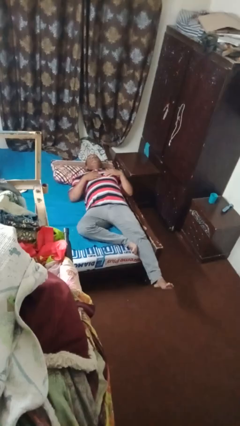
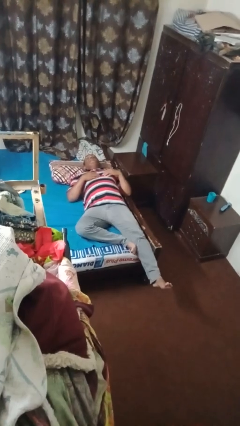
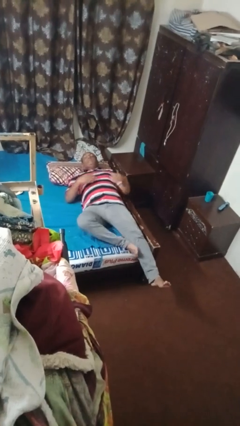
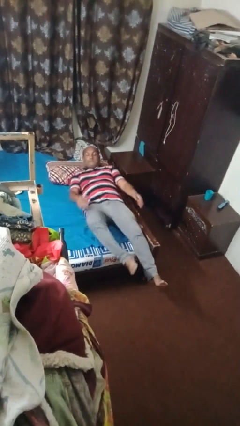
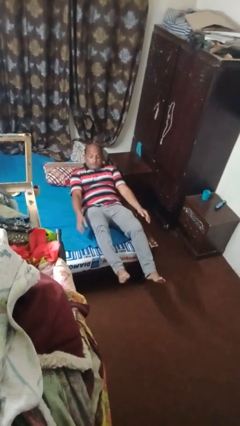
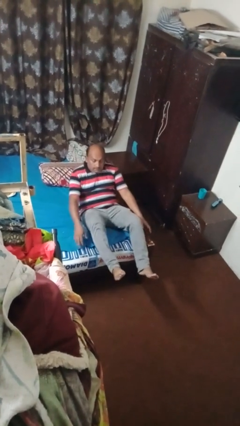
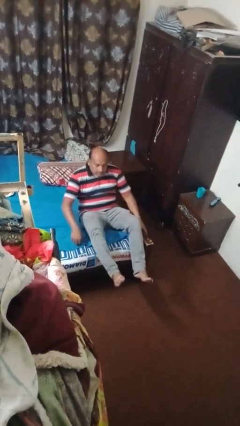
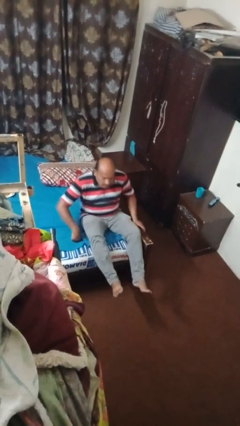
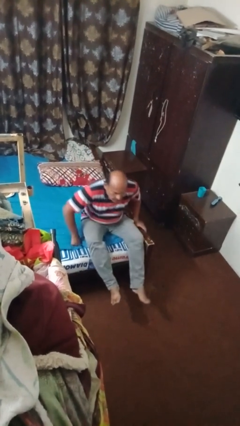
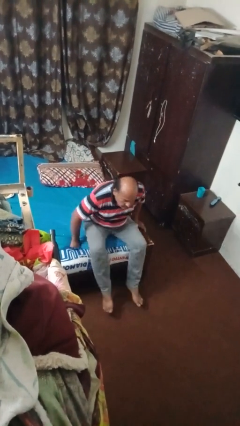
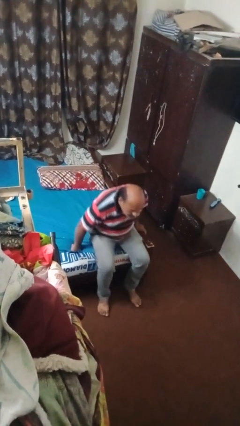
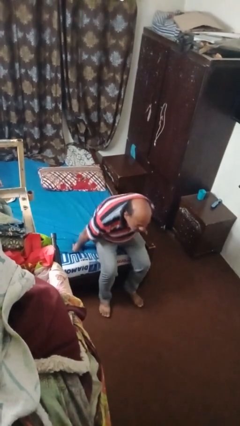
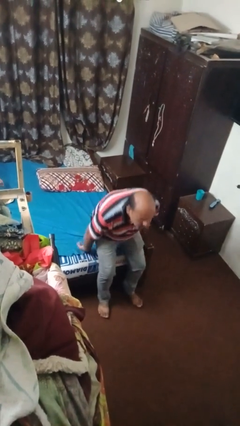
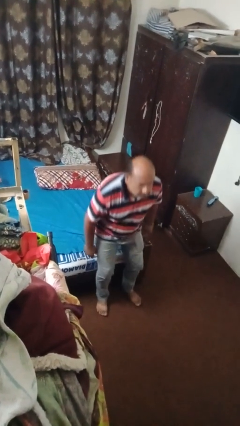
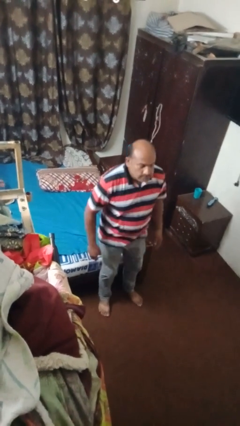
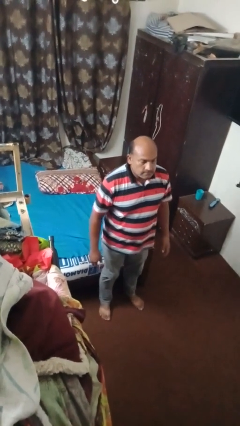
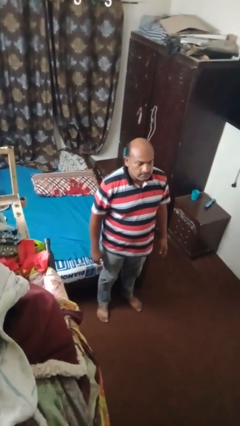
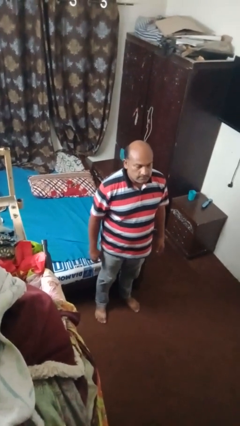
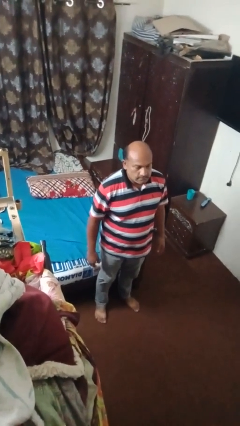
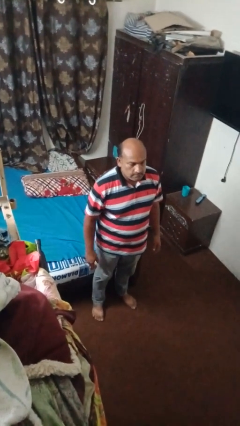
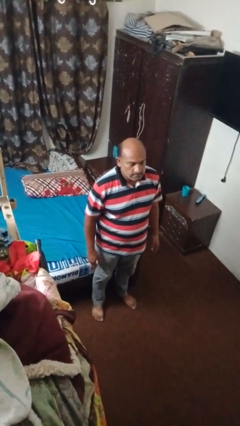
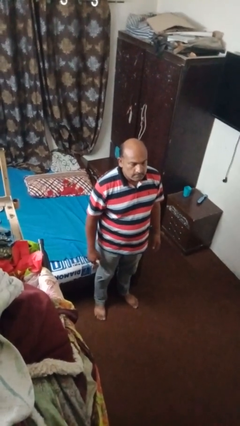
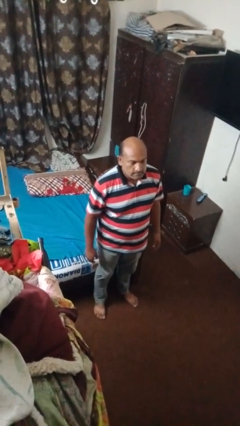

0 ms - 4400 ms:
person stands up

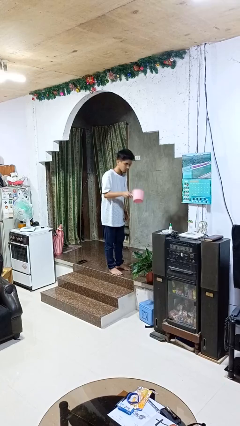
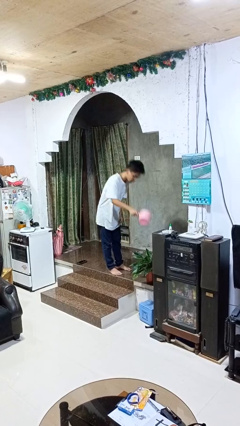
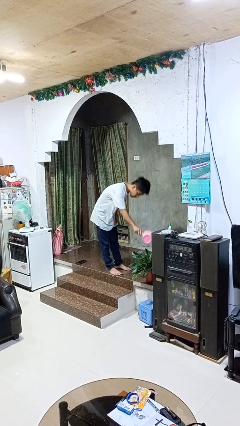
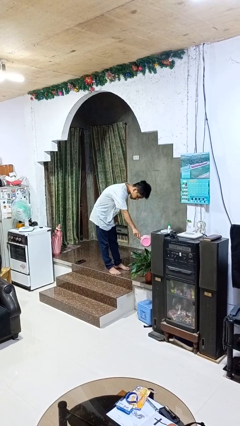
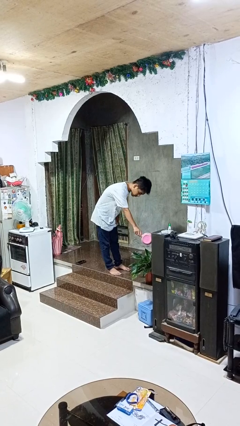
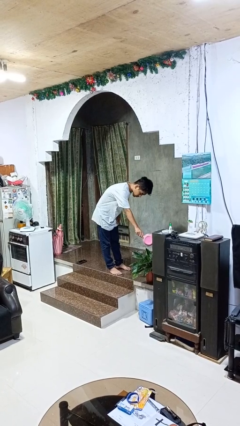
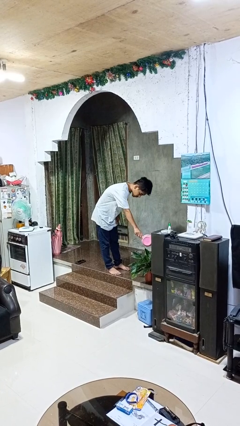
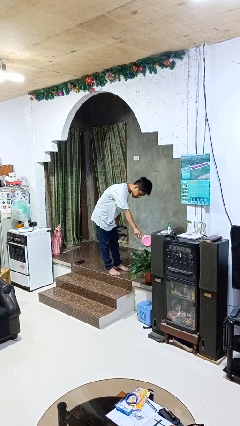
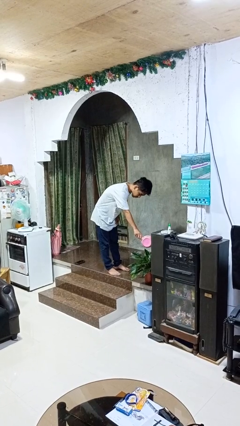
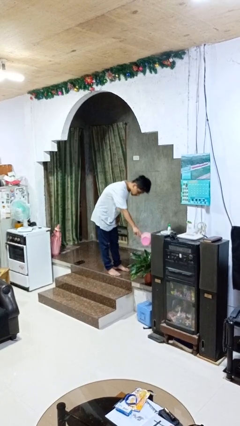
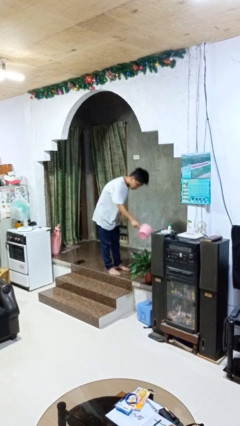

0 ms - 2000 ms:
person waters houseplant

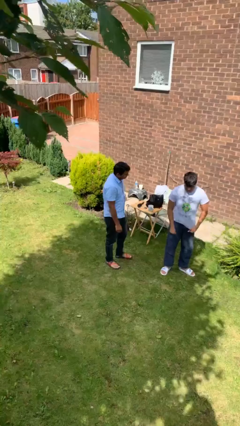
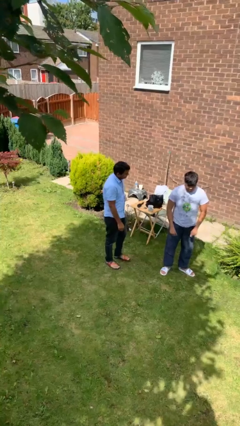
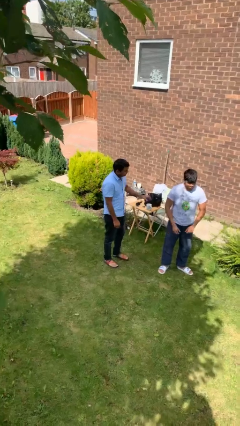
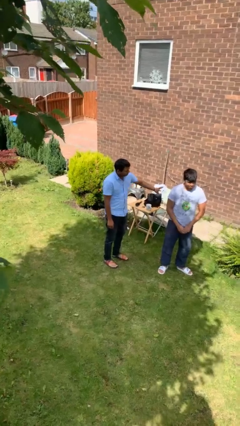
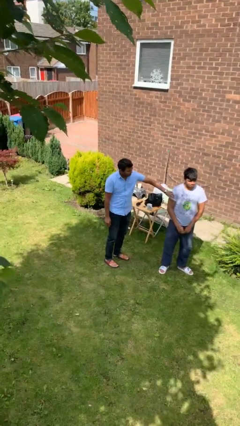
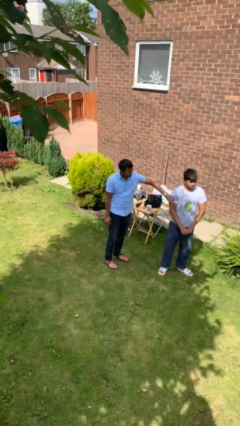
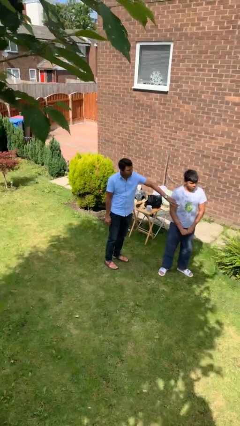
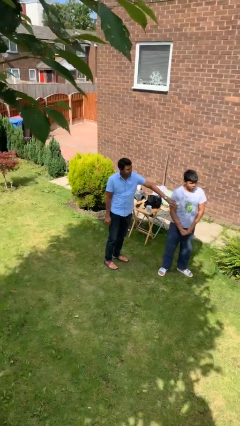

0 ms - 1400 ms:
person grabs person by bicep

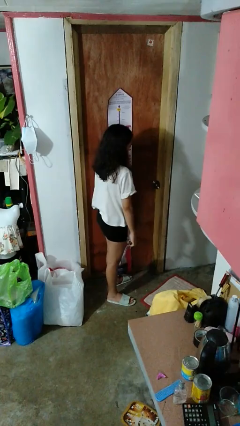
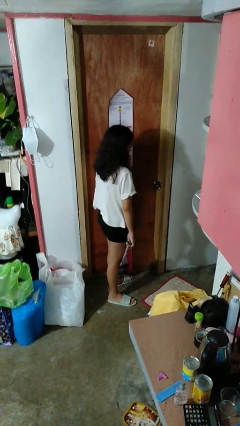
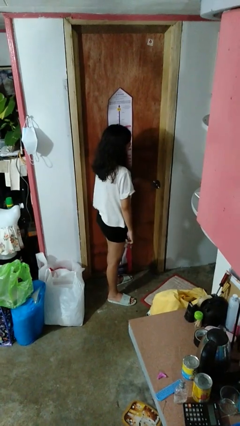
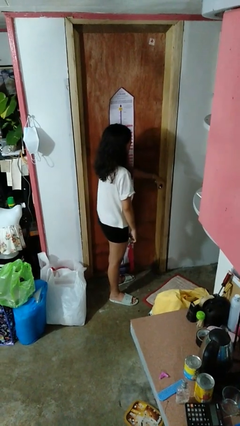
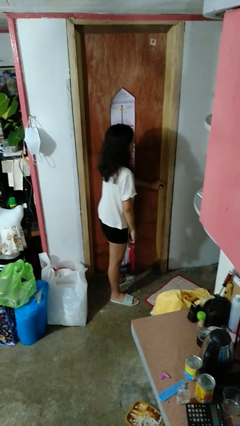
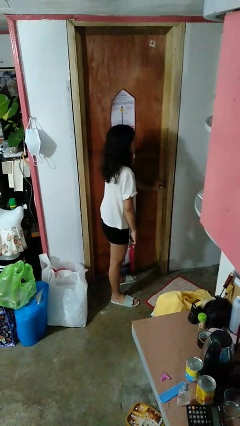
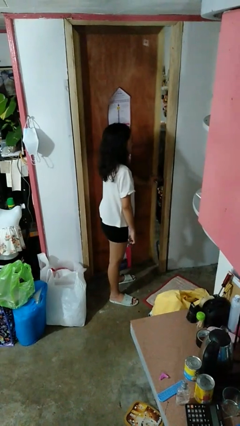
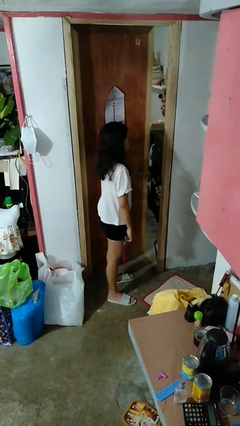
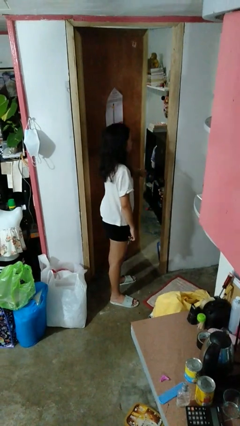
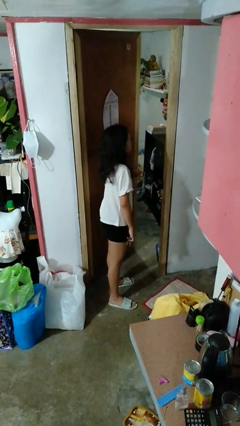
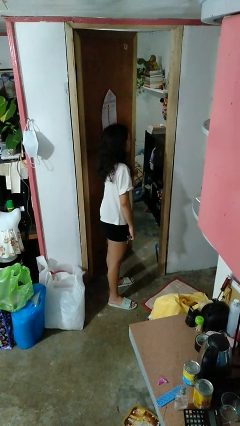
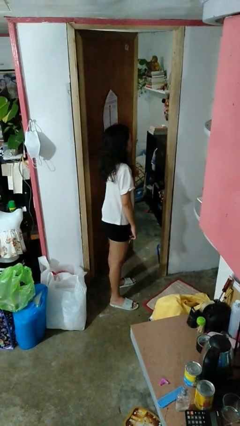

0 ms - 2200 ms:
person opens facility door

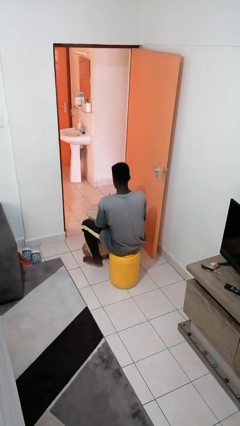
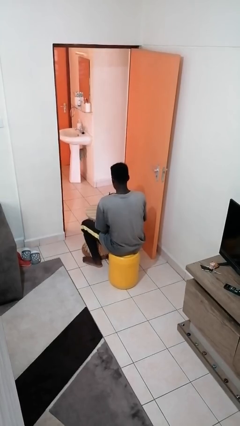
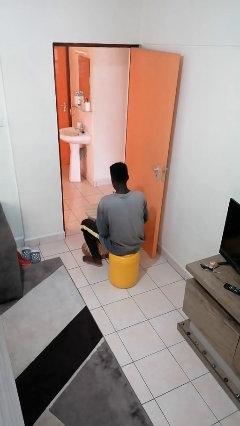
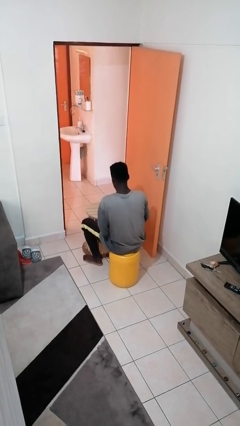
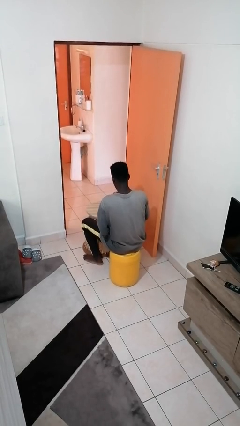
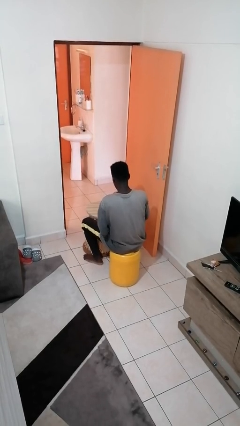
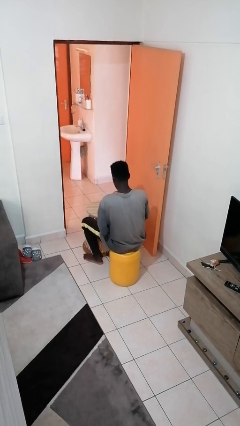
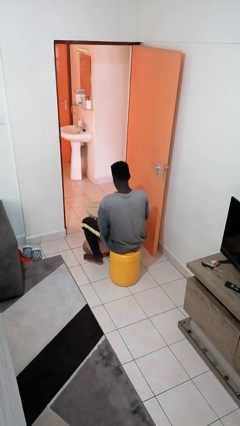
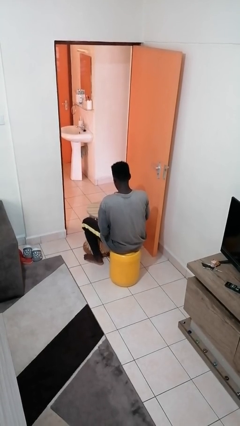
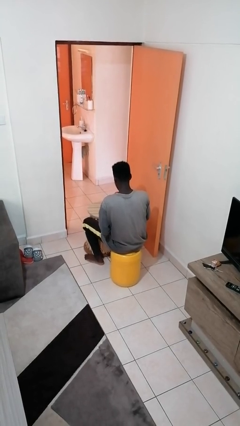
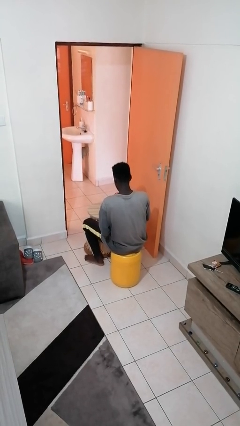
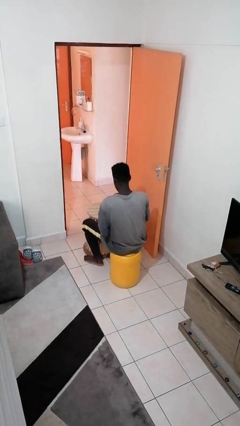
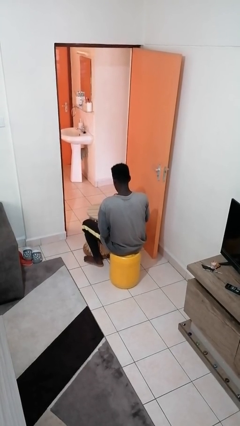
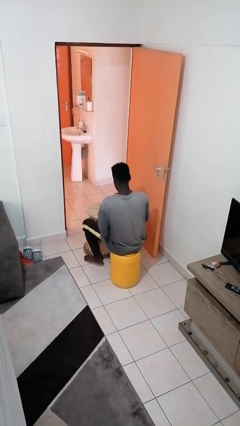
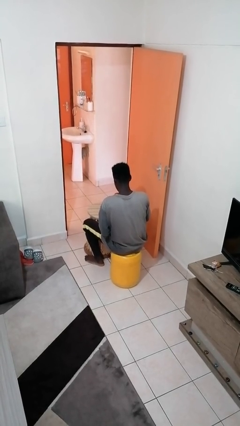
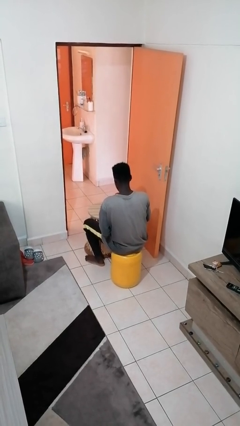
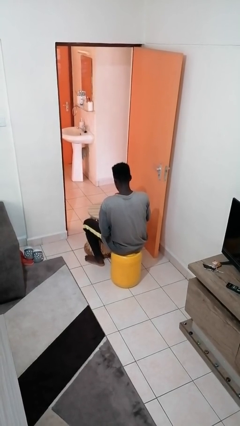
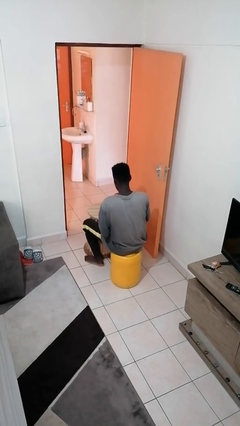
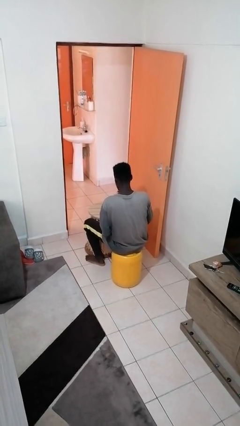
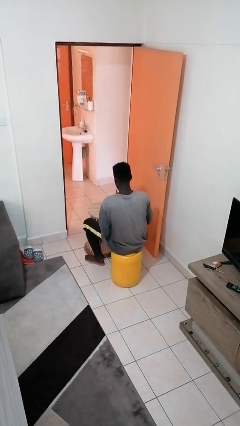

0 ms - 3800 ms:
person drinks from straw

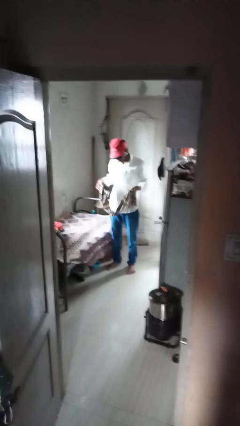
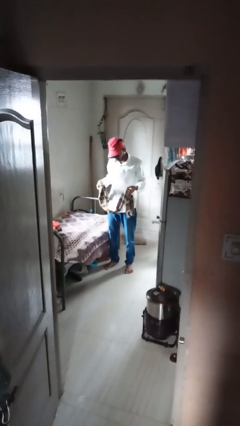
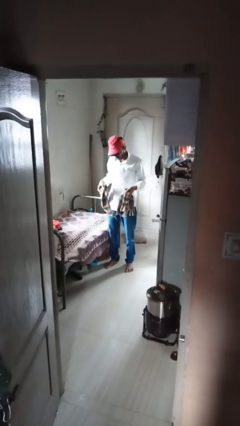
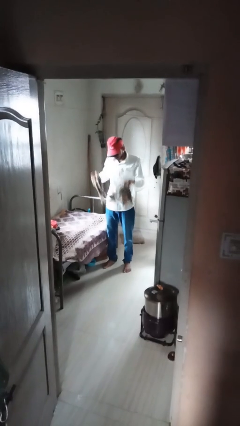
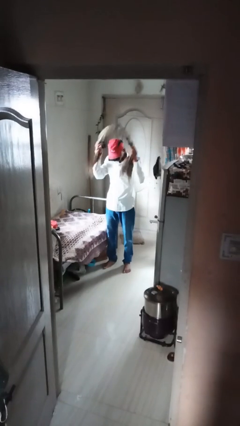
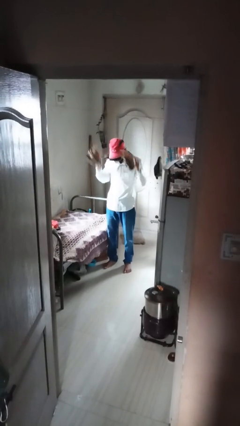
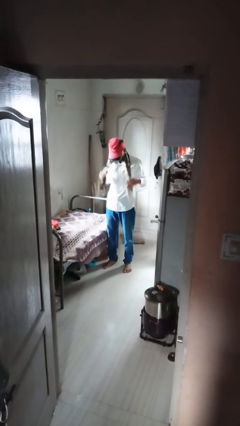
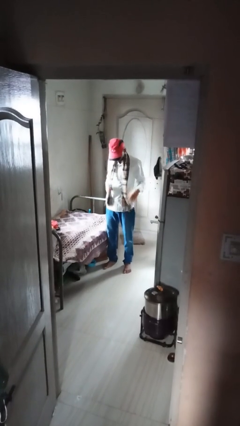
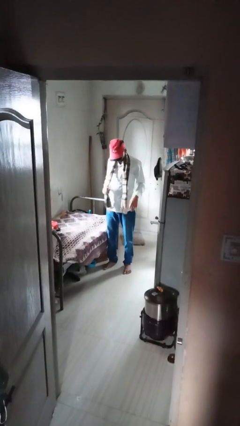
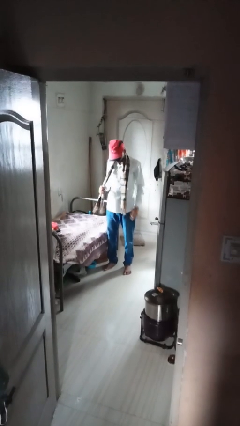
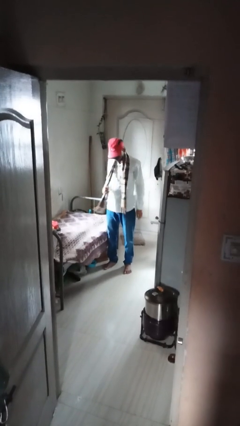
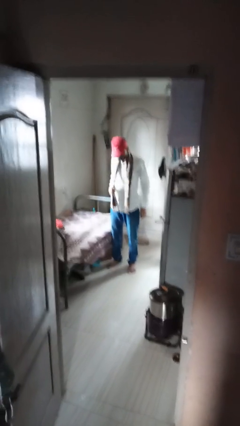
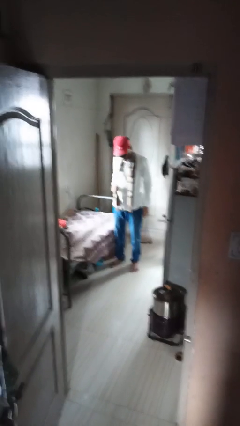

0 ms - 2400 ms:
person puts on scarf

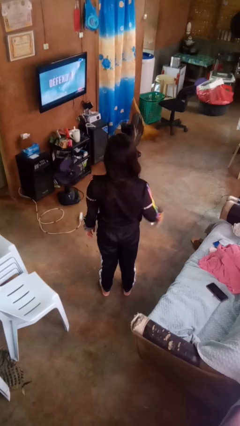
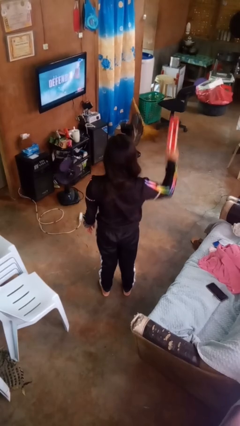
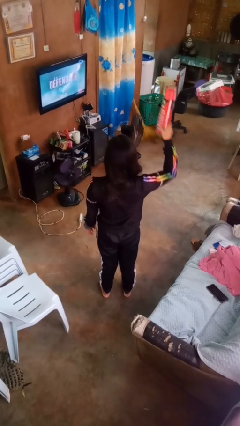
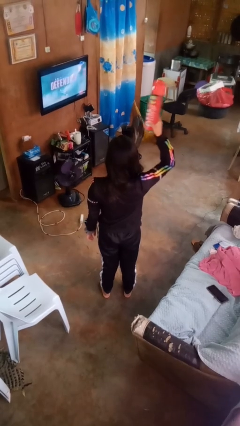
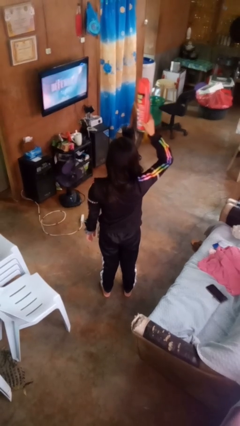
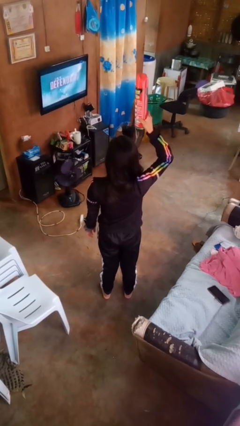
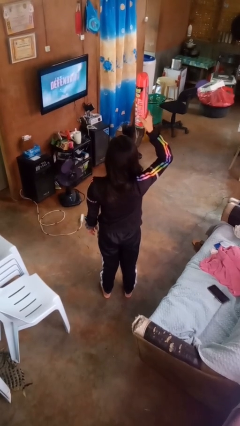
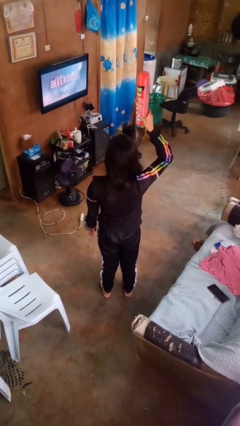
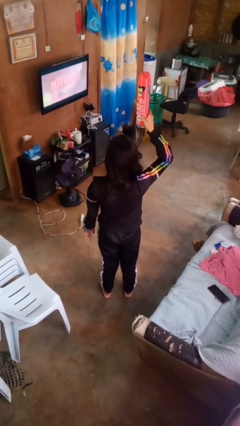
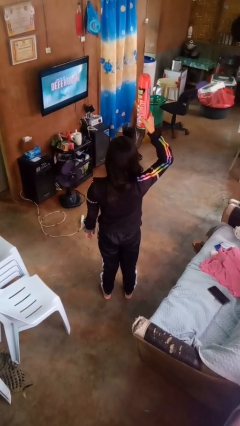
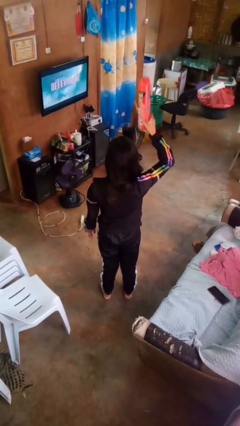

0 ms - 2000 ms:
person holds object above head
